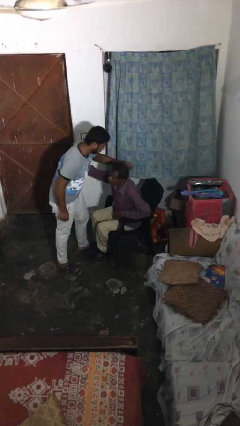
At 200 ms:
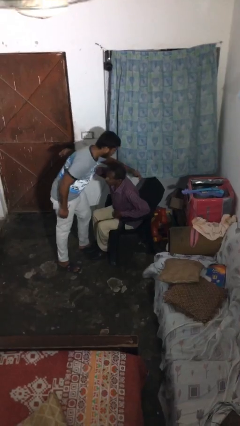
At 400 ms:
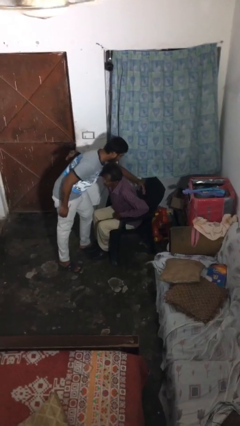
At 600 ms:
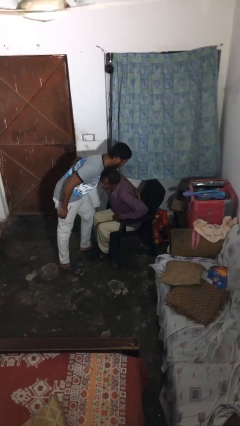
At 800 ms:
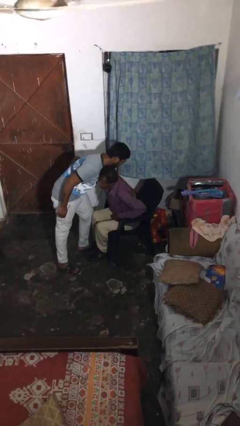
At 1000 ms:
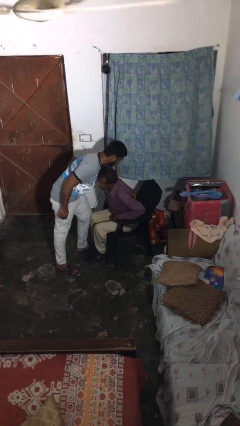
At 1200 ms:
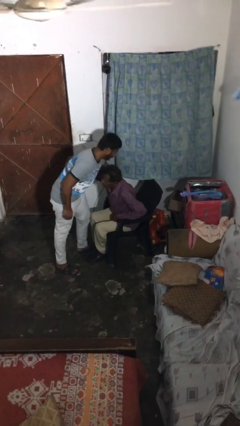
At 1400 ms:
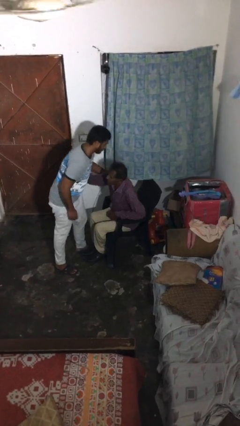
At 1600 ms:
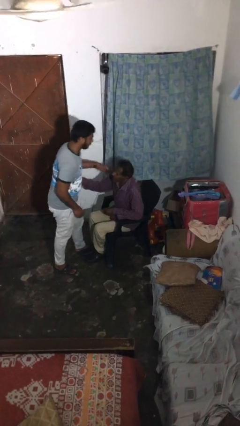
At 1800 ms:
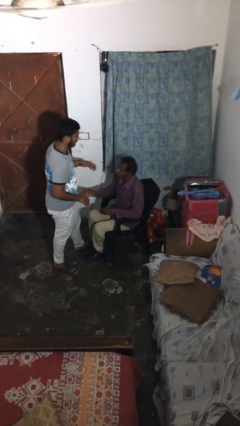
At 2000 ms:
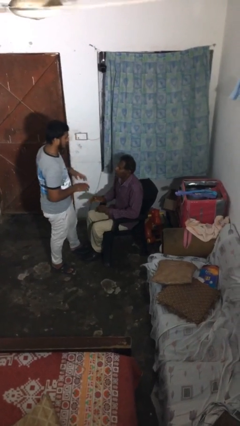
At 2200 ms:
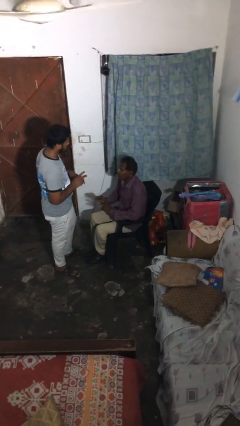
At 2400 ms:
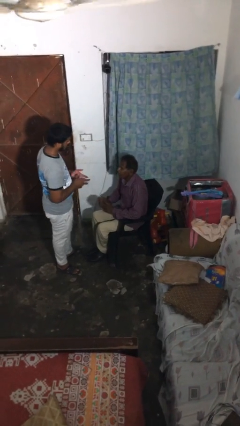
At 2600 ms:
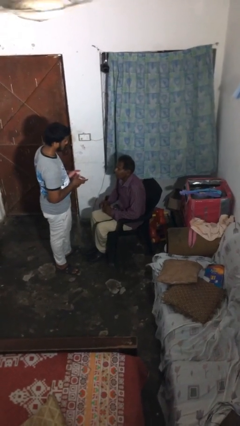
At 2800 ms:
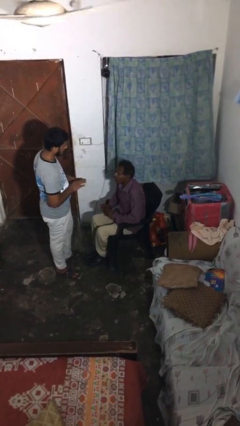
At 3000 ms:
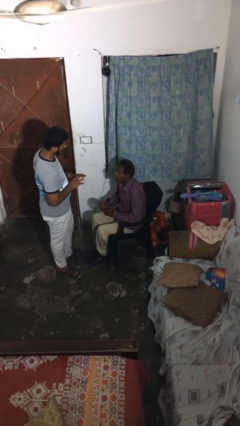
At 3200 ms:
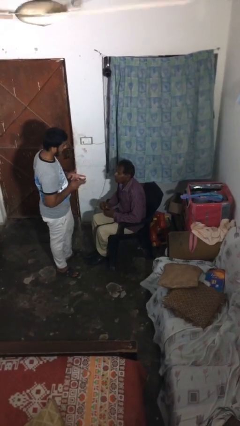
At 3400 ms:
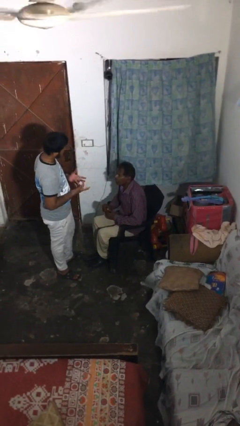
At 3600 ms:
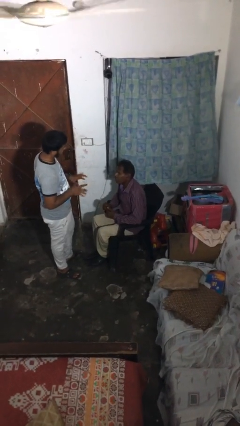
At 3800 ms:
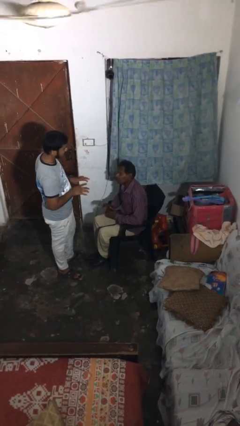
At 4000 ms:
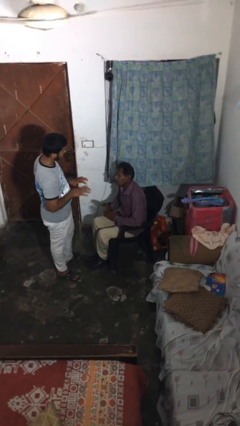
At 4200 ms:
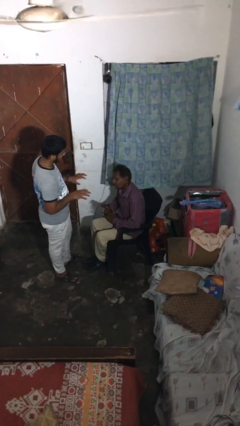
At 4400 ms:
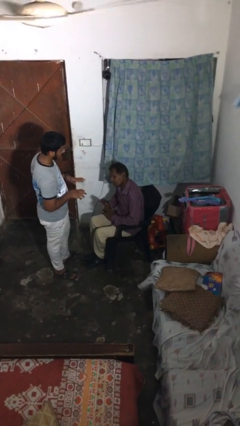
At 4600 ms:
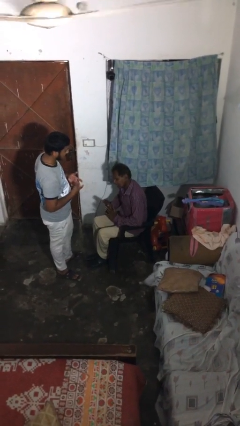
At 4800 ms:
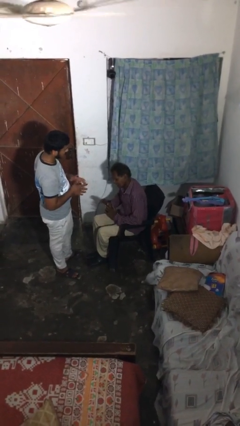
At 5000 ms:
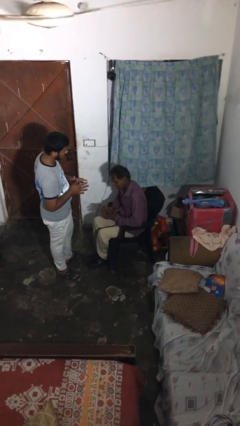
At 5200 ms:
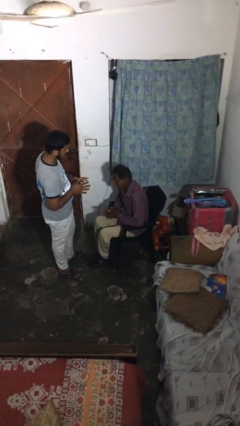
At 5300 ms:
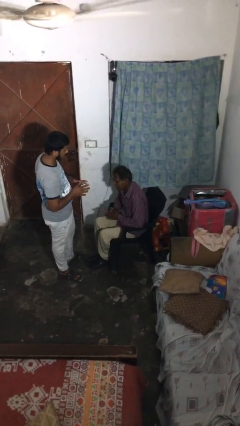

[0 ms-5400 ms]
person embraces person

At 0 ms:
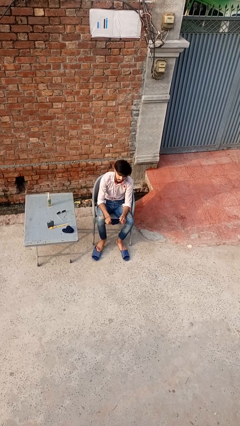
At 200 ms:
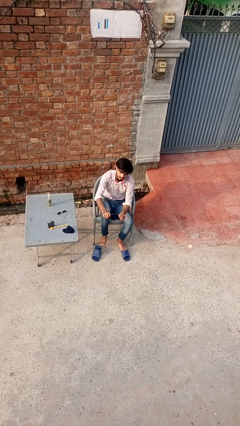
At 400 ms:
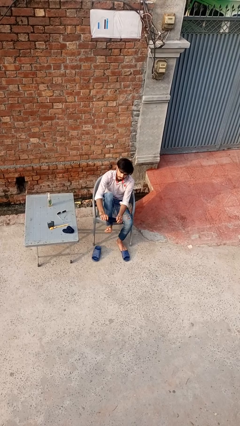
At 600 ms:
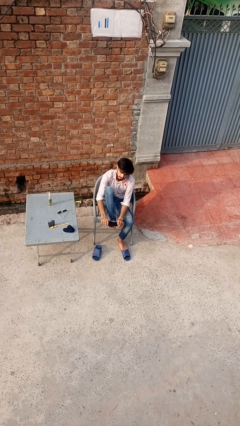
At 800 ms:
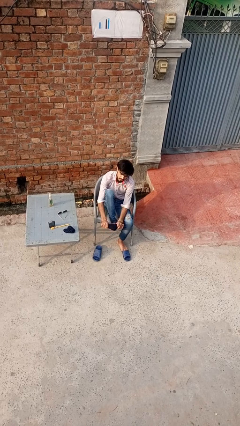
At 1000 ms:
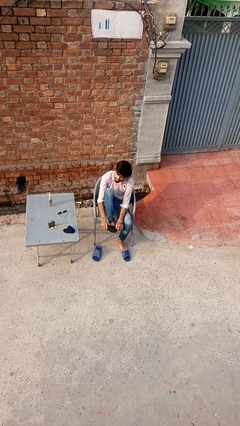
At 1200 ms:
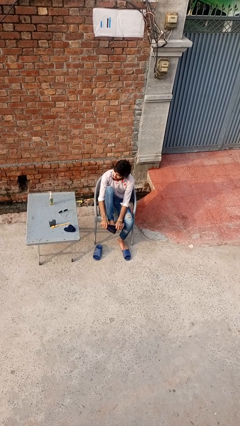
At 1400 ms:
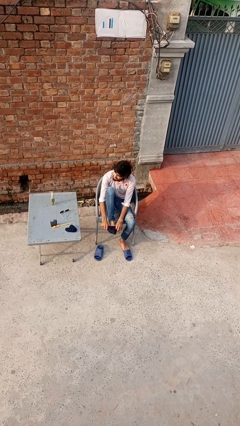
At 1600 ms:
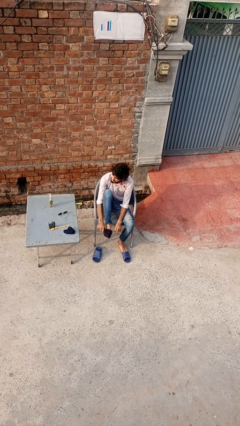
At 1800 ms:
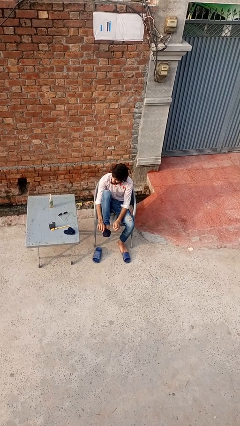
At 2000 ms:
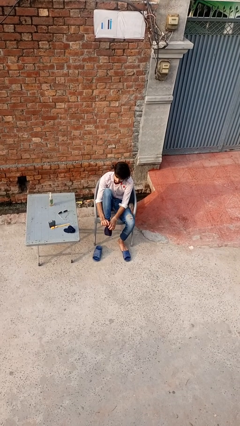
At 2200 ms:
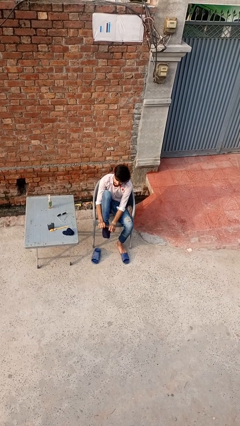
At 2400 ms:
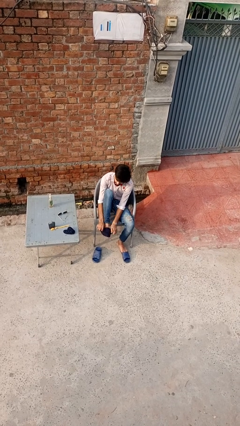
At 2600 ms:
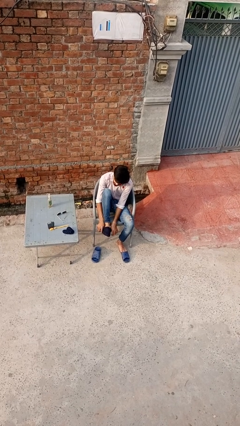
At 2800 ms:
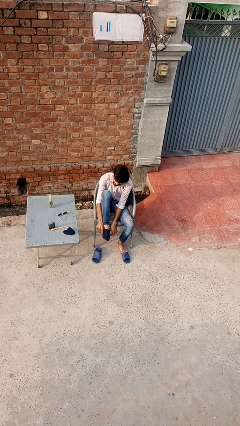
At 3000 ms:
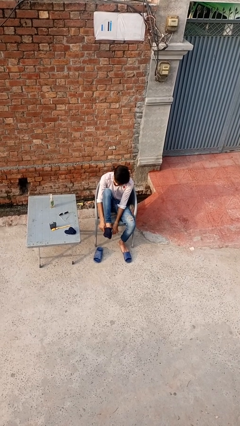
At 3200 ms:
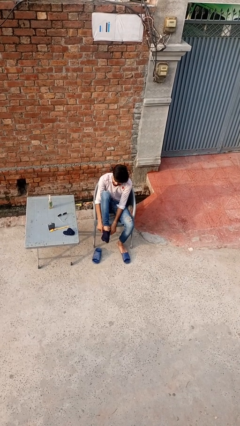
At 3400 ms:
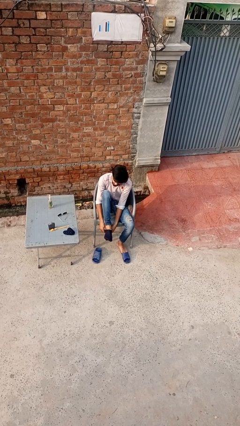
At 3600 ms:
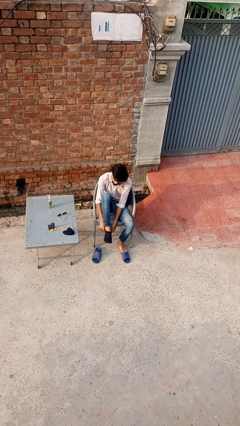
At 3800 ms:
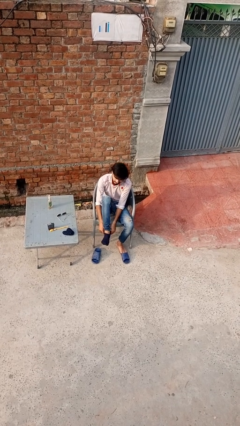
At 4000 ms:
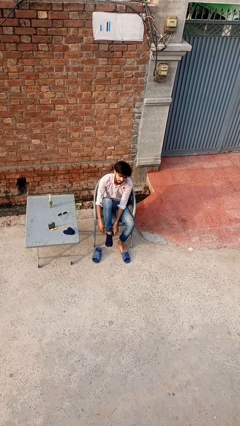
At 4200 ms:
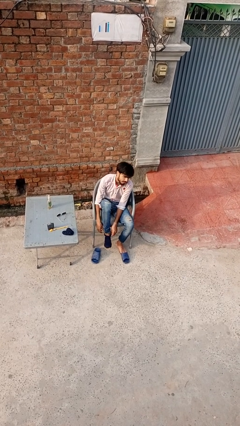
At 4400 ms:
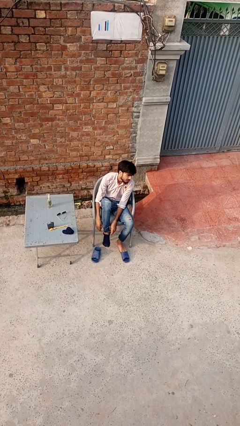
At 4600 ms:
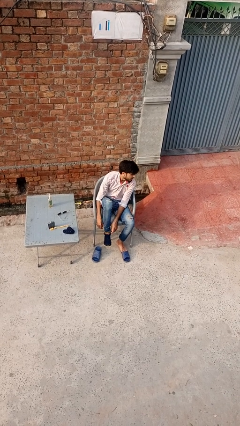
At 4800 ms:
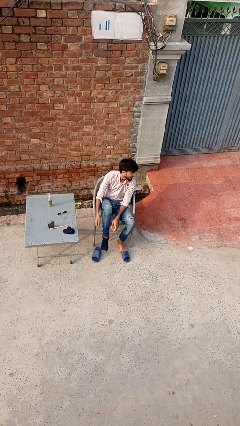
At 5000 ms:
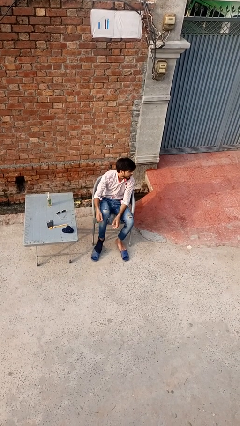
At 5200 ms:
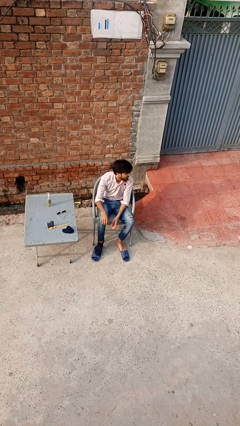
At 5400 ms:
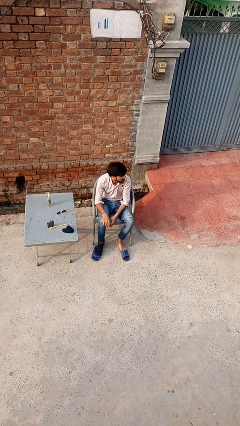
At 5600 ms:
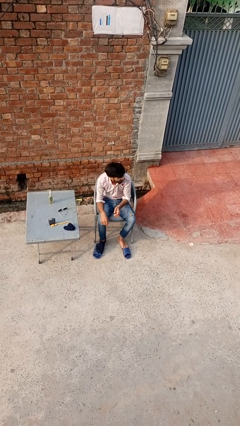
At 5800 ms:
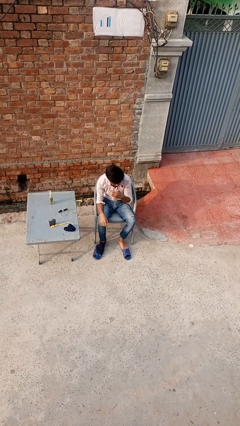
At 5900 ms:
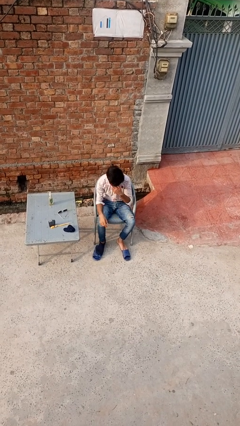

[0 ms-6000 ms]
person puts on socks

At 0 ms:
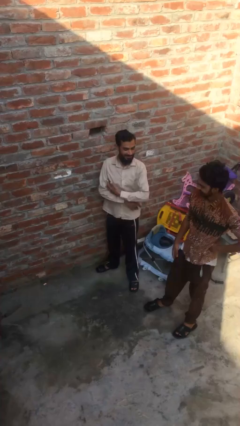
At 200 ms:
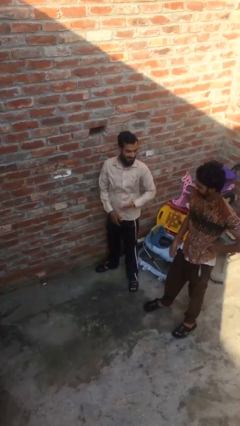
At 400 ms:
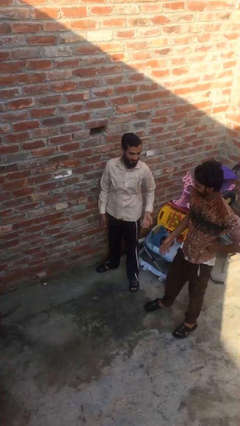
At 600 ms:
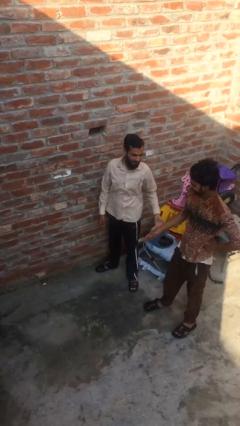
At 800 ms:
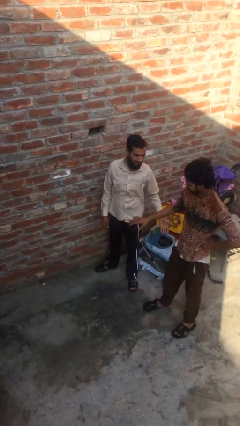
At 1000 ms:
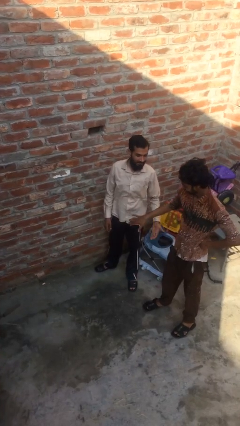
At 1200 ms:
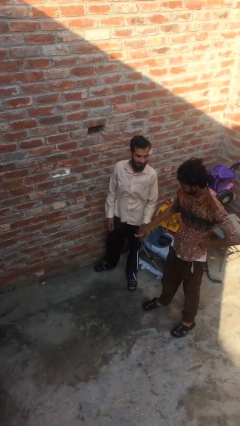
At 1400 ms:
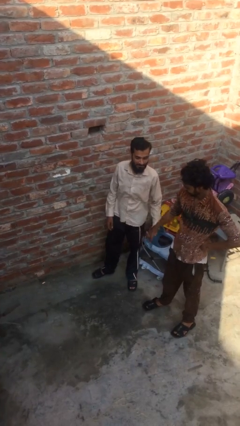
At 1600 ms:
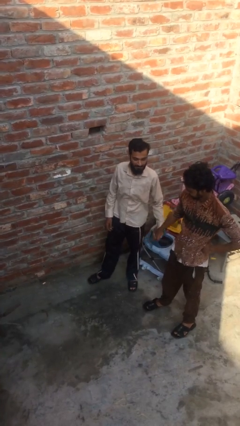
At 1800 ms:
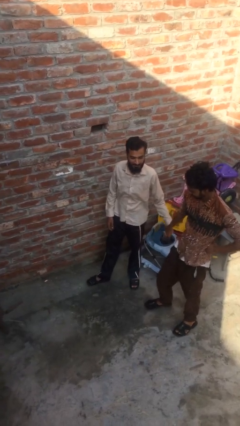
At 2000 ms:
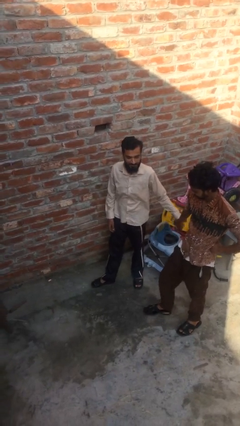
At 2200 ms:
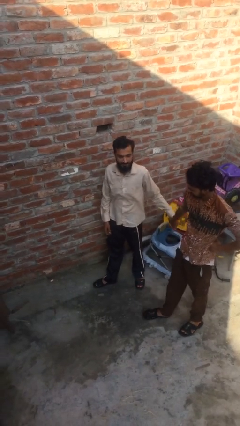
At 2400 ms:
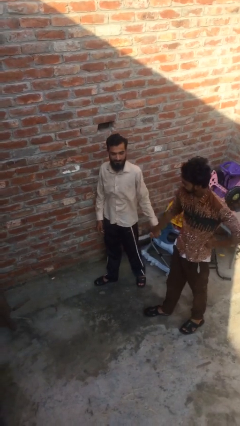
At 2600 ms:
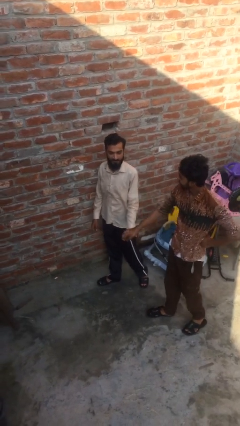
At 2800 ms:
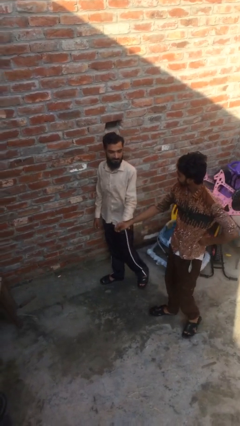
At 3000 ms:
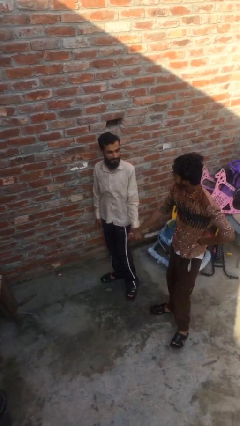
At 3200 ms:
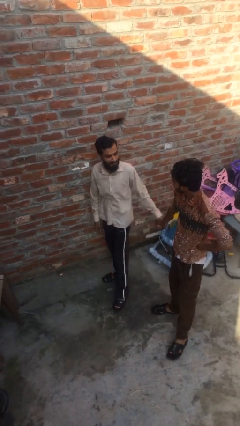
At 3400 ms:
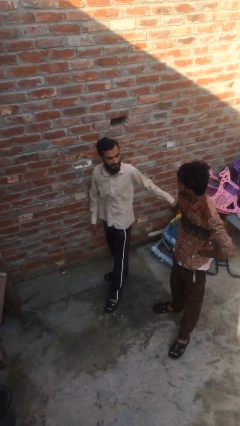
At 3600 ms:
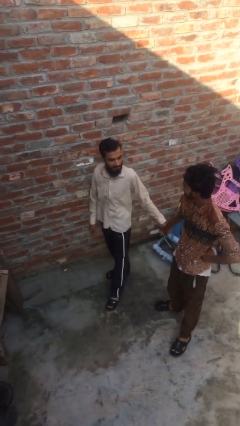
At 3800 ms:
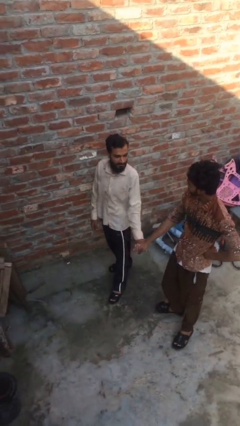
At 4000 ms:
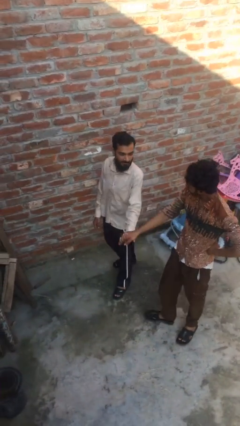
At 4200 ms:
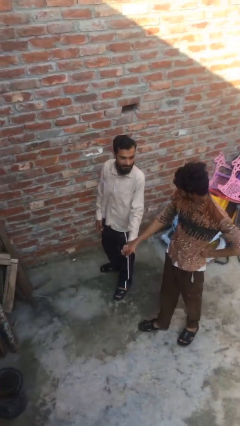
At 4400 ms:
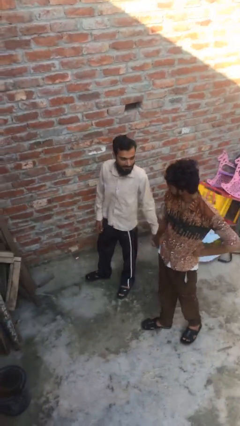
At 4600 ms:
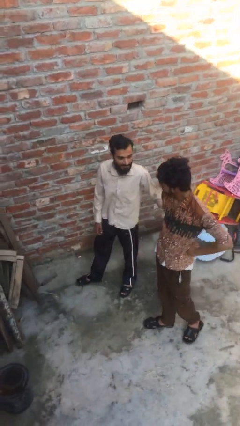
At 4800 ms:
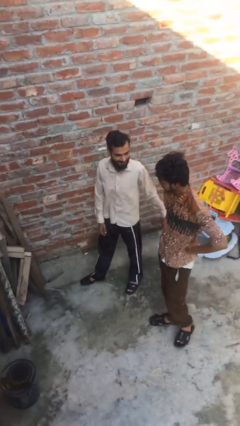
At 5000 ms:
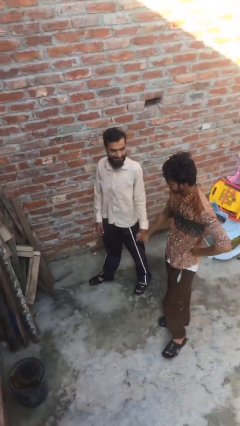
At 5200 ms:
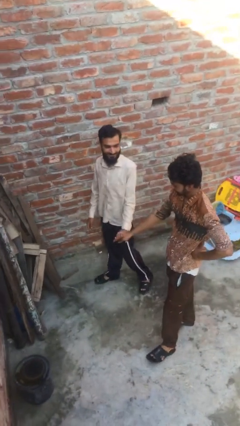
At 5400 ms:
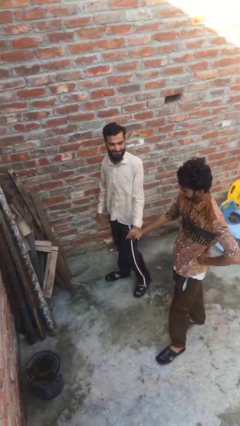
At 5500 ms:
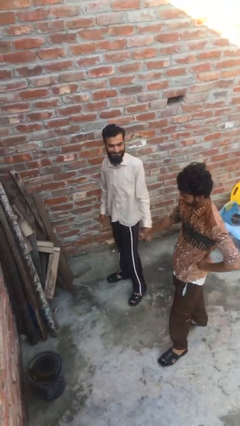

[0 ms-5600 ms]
person holds hand

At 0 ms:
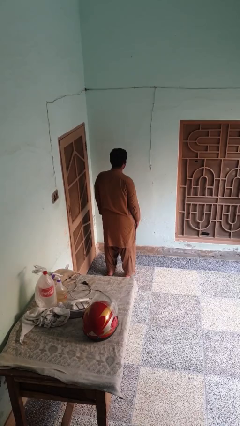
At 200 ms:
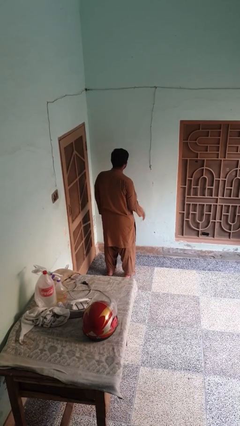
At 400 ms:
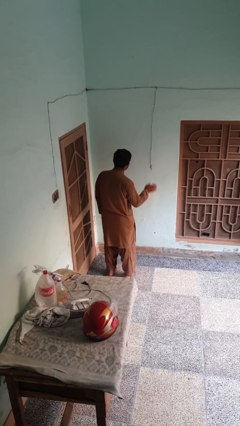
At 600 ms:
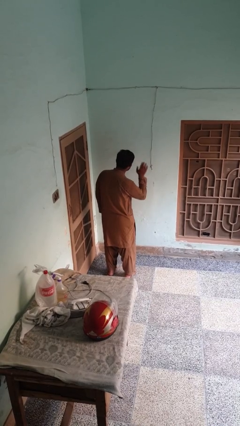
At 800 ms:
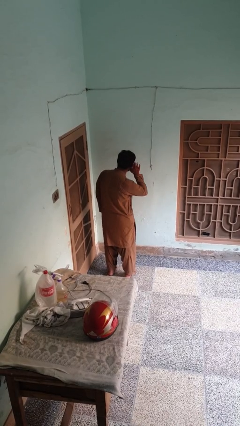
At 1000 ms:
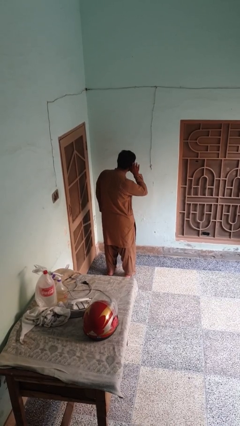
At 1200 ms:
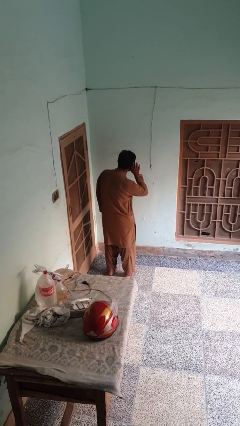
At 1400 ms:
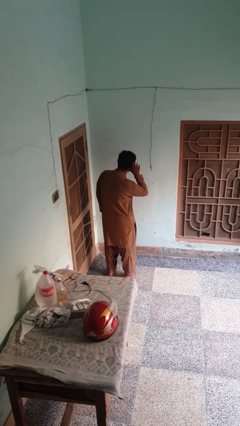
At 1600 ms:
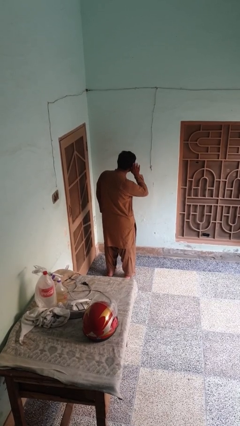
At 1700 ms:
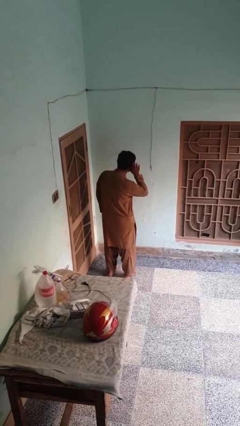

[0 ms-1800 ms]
person gestures listen closely
